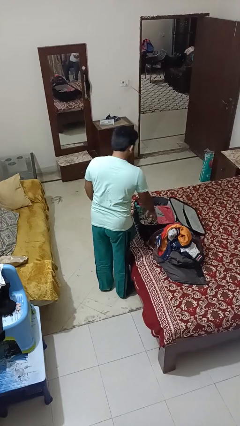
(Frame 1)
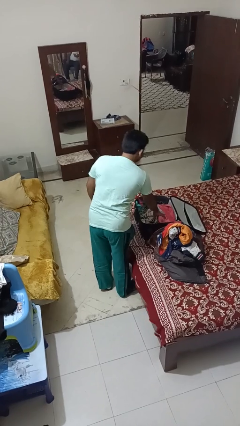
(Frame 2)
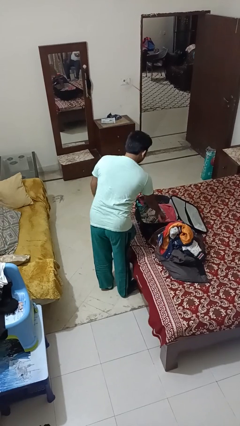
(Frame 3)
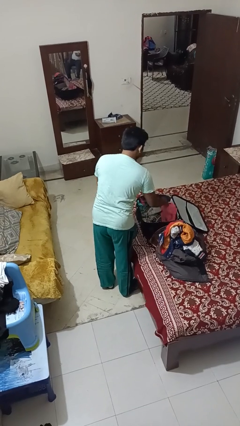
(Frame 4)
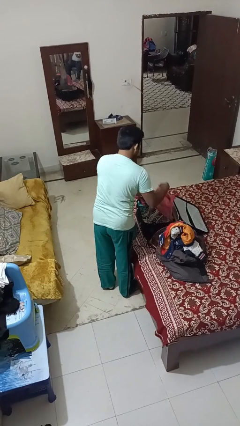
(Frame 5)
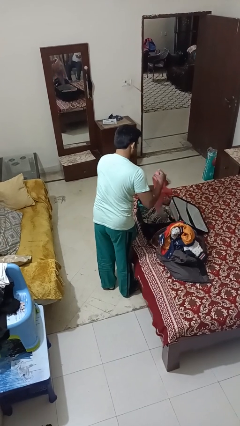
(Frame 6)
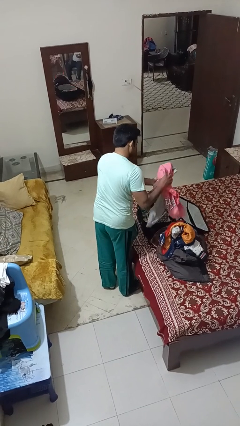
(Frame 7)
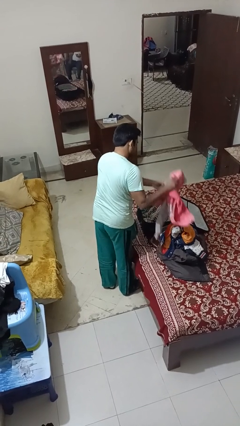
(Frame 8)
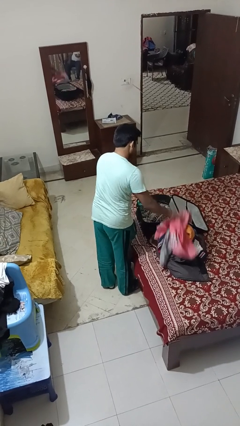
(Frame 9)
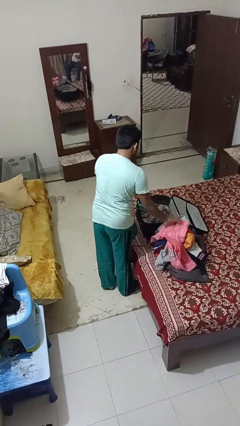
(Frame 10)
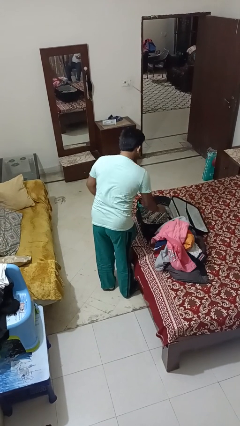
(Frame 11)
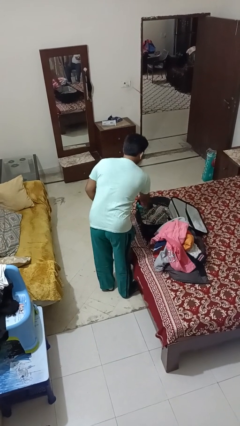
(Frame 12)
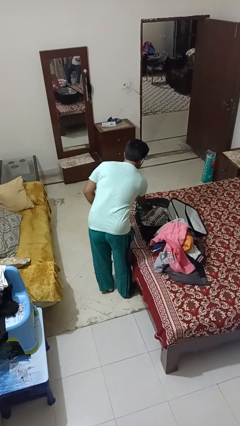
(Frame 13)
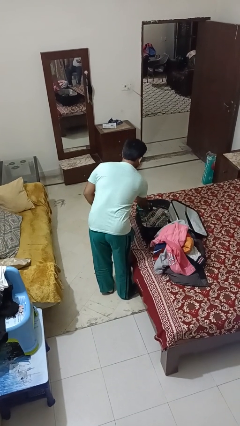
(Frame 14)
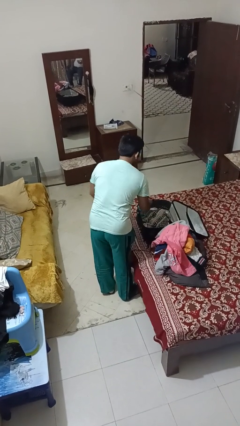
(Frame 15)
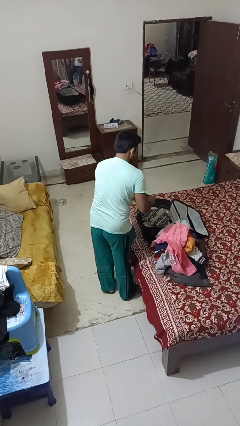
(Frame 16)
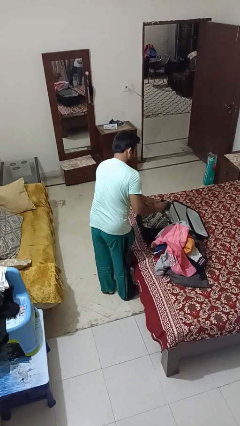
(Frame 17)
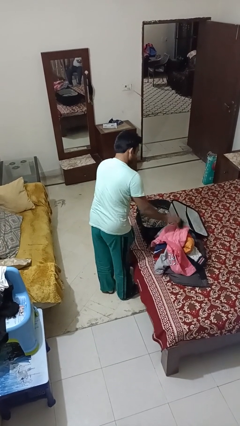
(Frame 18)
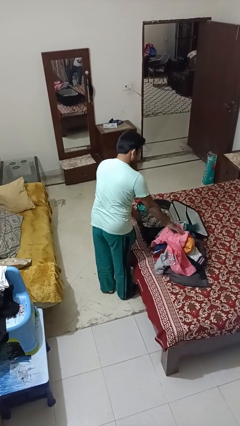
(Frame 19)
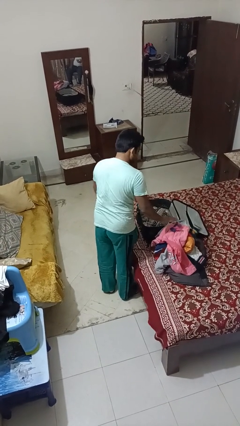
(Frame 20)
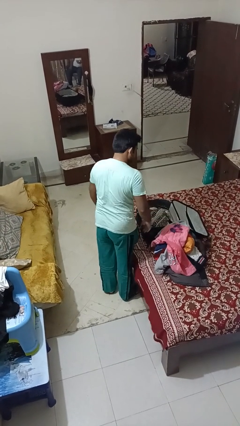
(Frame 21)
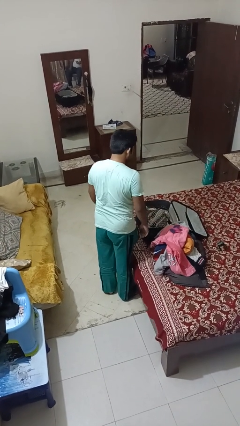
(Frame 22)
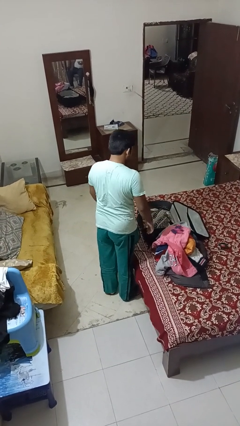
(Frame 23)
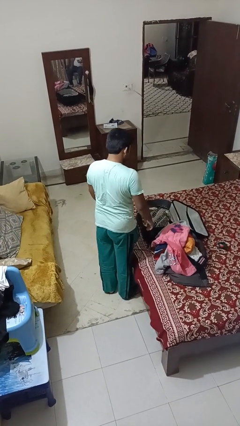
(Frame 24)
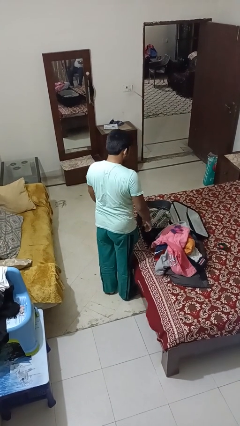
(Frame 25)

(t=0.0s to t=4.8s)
person unloads clothes from suitcase

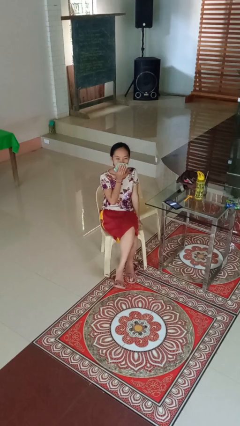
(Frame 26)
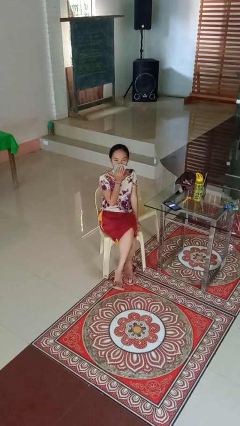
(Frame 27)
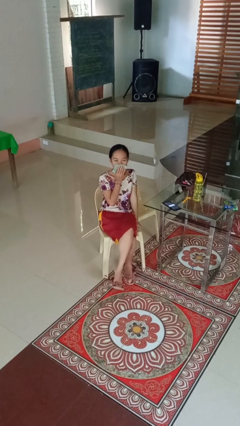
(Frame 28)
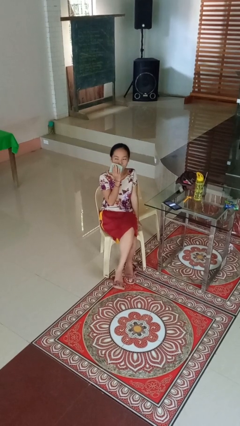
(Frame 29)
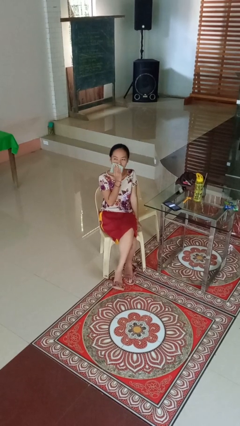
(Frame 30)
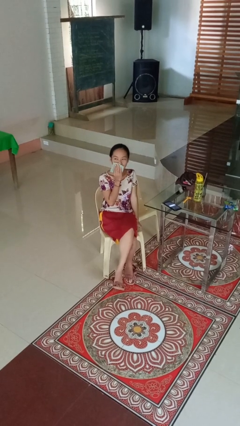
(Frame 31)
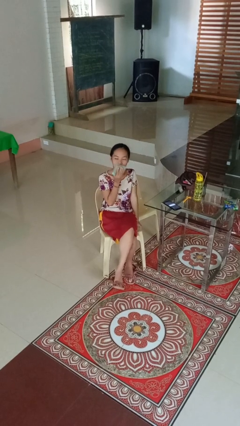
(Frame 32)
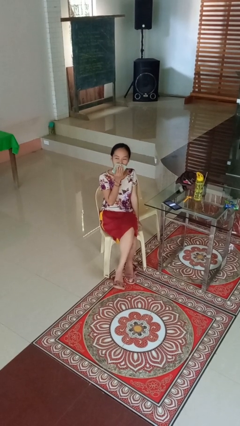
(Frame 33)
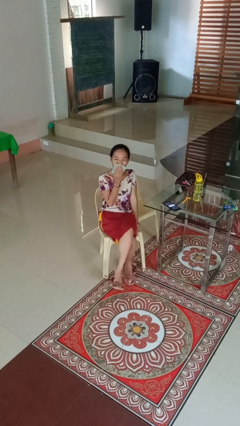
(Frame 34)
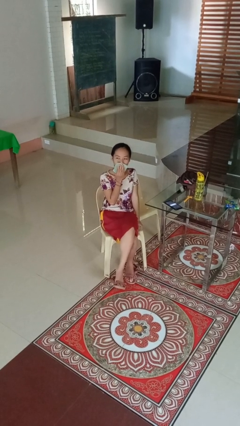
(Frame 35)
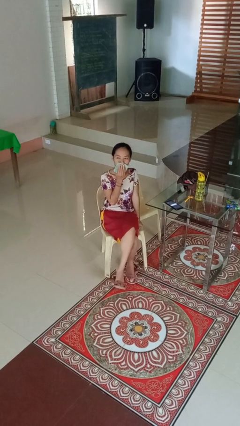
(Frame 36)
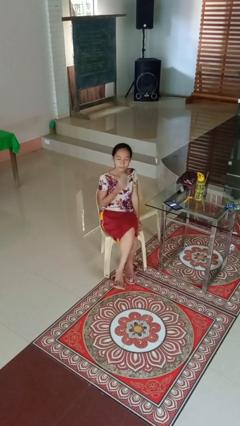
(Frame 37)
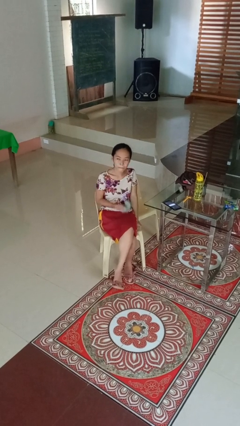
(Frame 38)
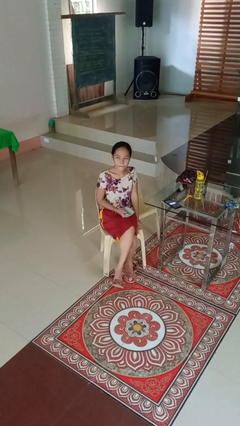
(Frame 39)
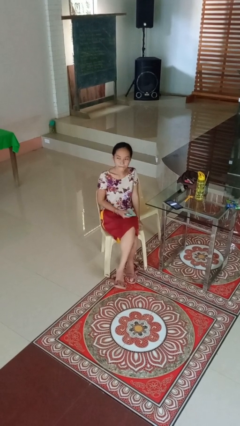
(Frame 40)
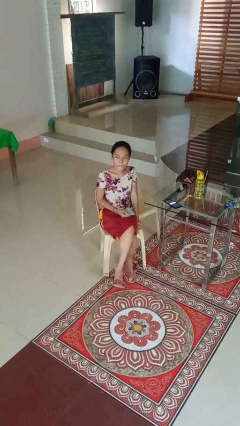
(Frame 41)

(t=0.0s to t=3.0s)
person wipes mouth with napkin

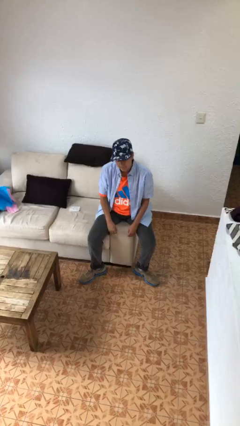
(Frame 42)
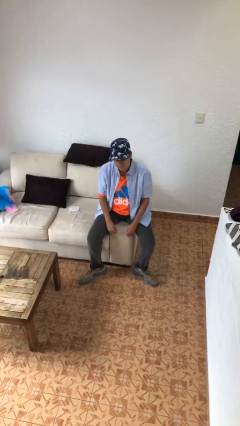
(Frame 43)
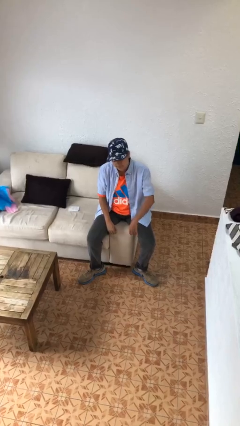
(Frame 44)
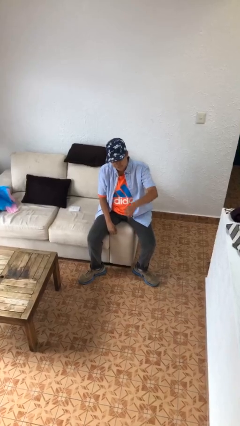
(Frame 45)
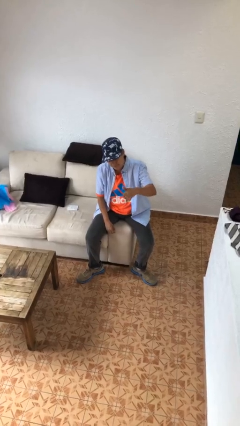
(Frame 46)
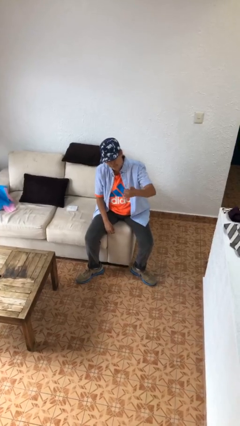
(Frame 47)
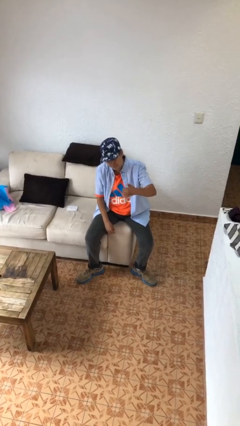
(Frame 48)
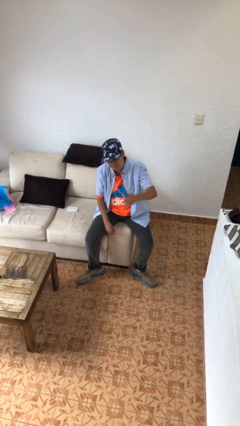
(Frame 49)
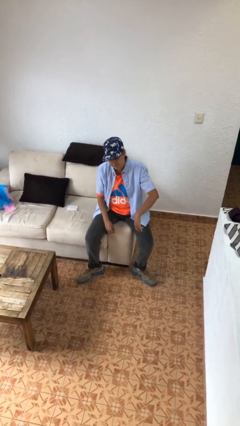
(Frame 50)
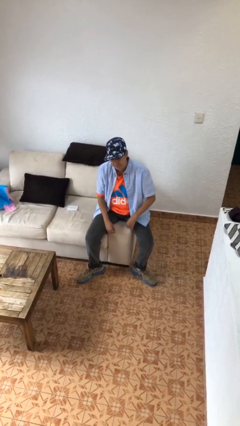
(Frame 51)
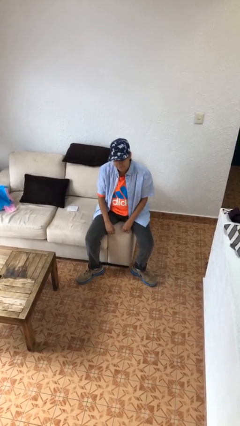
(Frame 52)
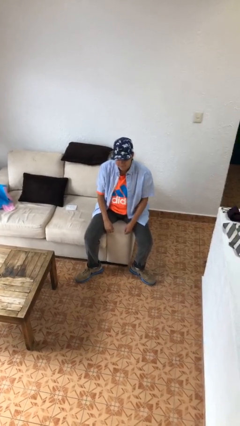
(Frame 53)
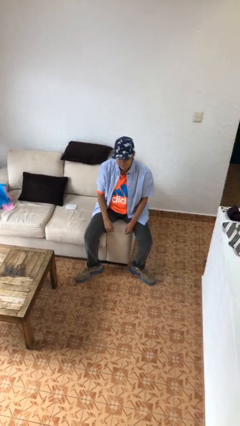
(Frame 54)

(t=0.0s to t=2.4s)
person gestures hang loose

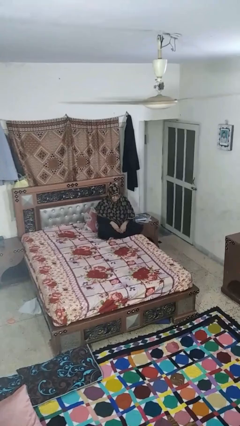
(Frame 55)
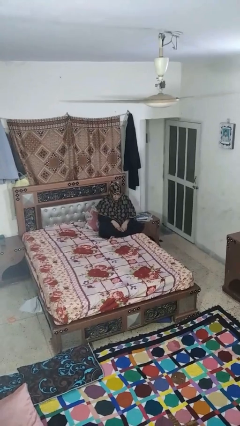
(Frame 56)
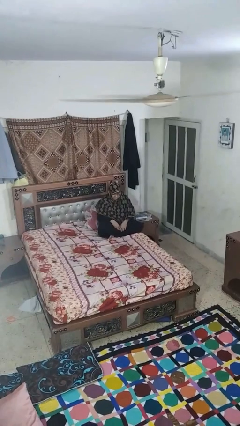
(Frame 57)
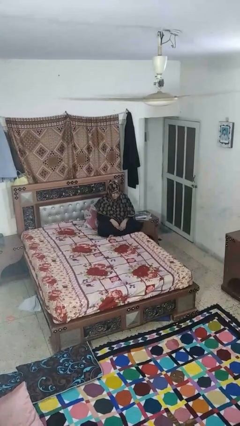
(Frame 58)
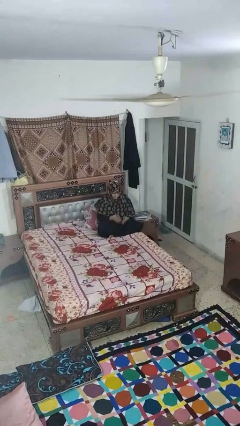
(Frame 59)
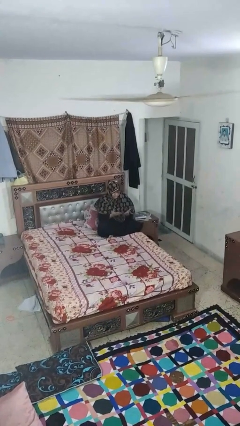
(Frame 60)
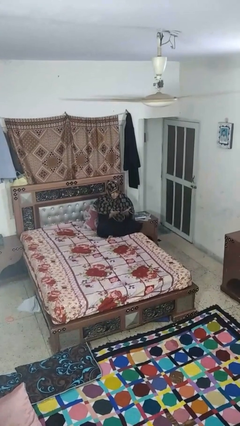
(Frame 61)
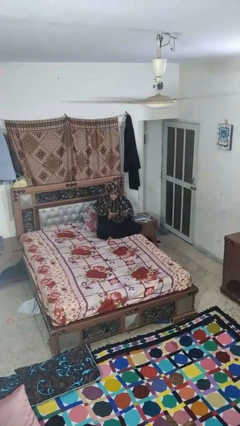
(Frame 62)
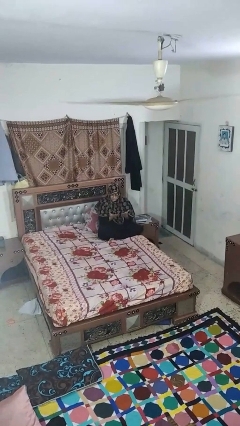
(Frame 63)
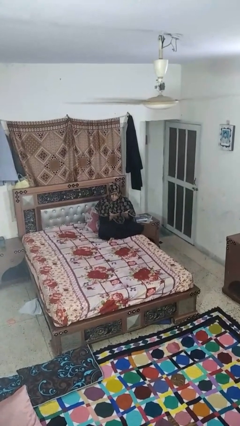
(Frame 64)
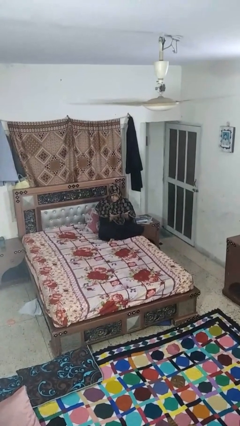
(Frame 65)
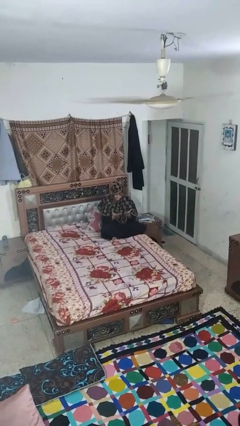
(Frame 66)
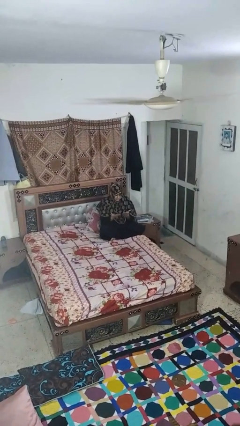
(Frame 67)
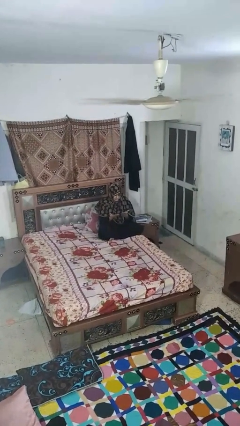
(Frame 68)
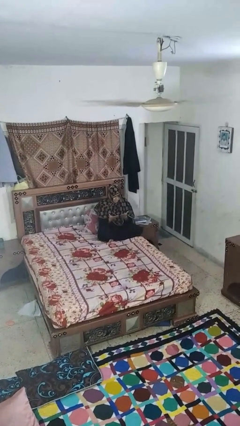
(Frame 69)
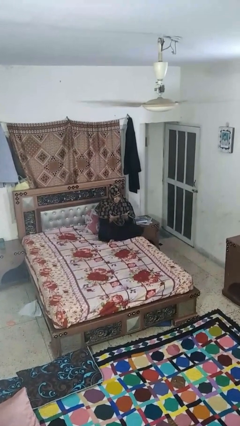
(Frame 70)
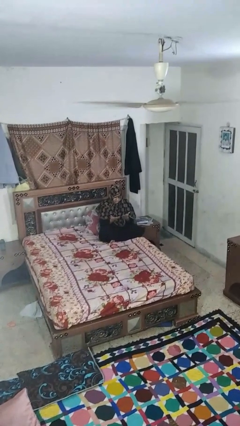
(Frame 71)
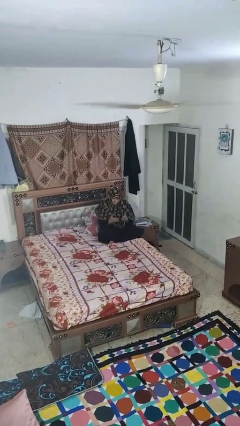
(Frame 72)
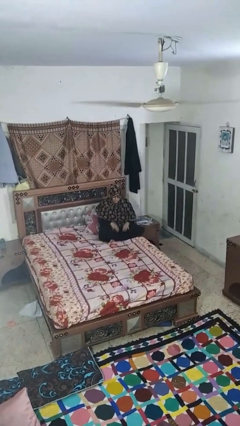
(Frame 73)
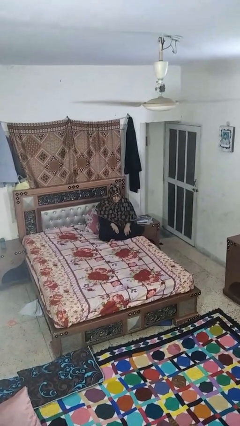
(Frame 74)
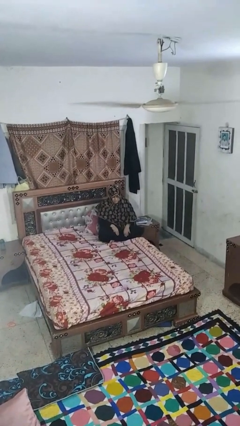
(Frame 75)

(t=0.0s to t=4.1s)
person looks at hands in lap

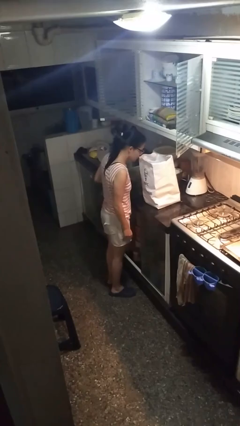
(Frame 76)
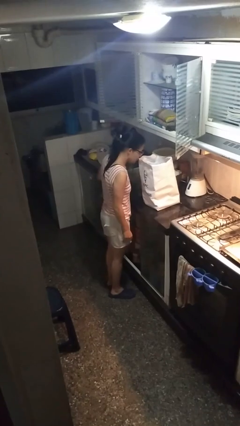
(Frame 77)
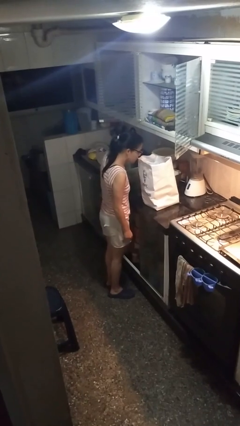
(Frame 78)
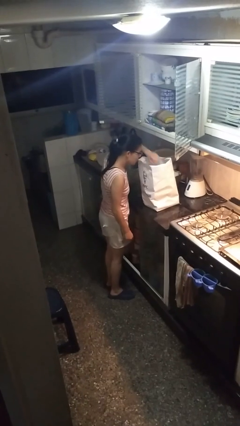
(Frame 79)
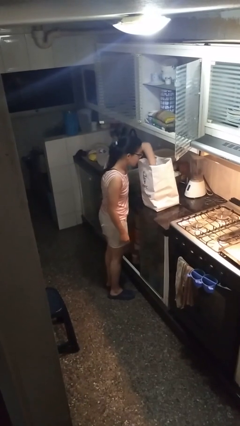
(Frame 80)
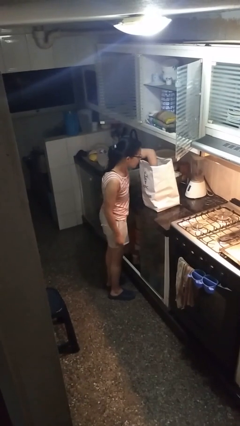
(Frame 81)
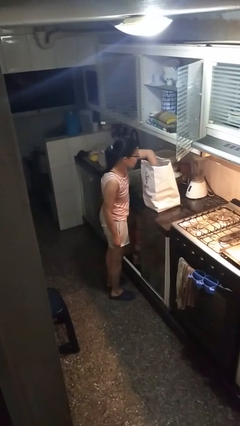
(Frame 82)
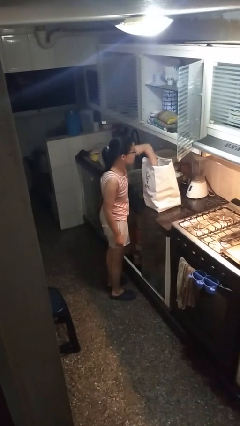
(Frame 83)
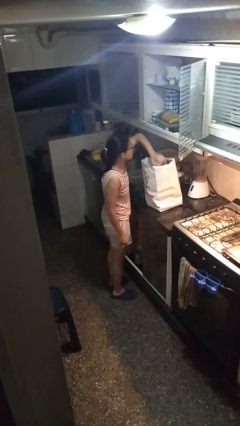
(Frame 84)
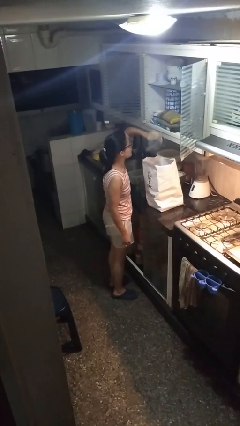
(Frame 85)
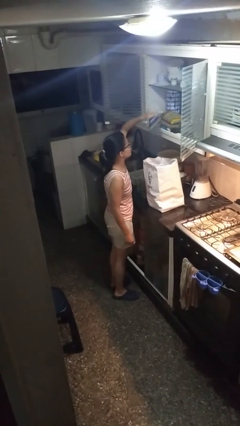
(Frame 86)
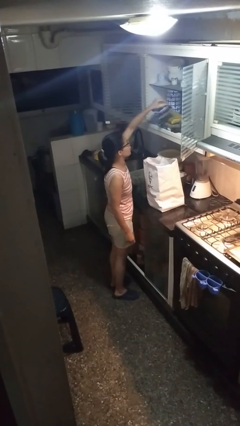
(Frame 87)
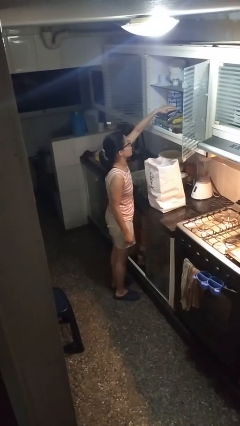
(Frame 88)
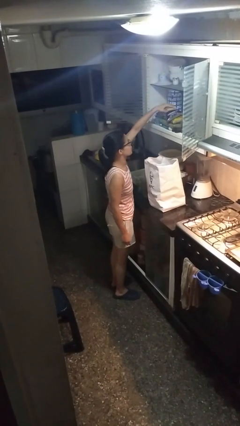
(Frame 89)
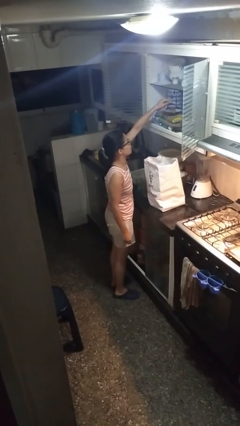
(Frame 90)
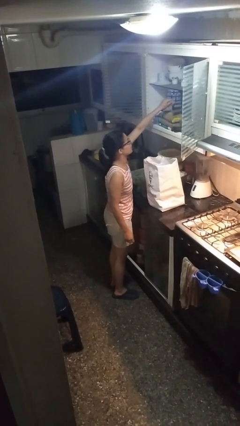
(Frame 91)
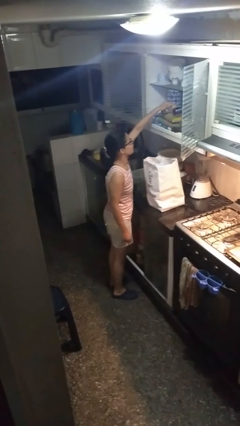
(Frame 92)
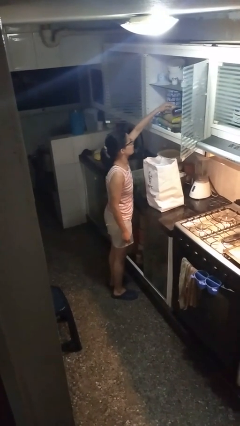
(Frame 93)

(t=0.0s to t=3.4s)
person loads groceries into cabinet
